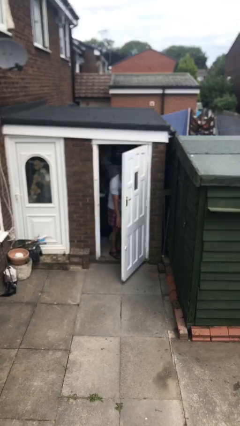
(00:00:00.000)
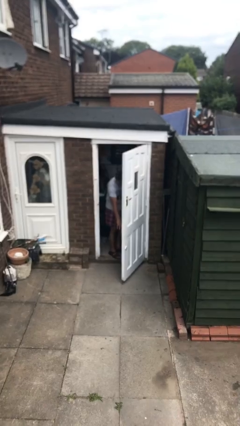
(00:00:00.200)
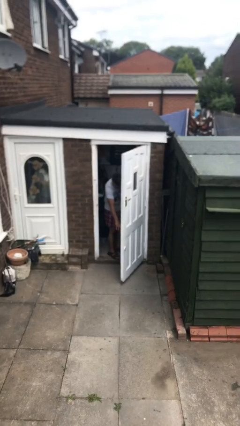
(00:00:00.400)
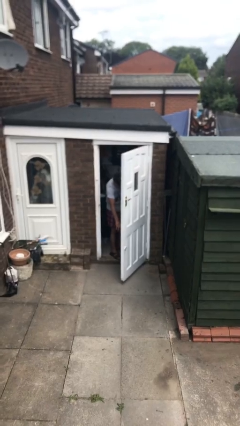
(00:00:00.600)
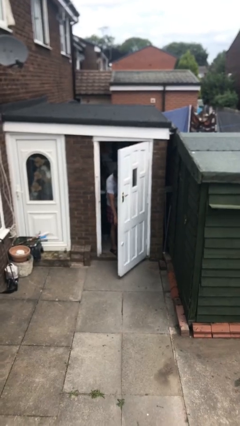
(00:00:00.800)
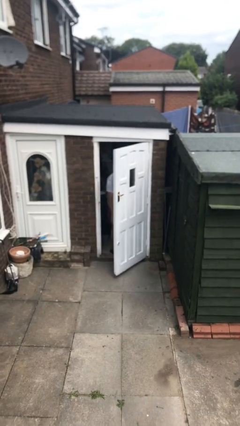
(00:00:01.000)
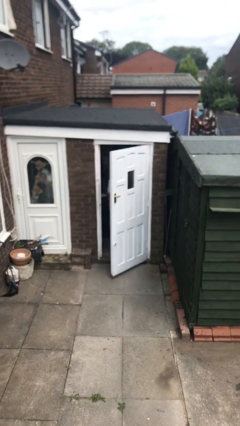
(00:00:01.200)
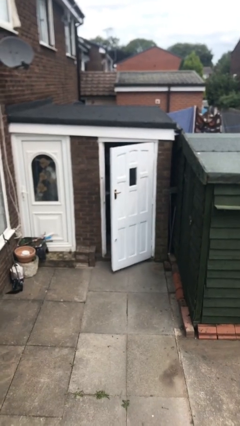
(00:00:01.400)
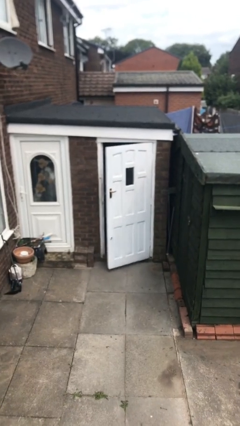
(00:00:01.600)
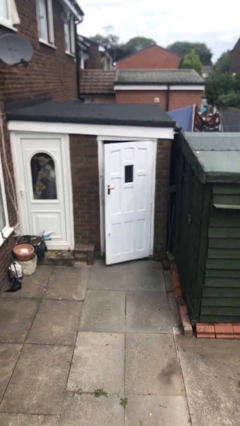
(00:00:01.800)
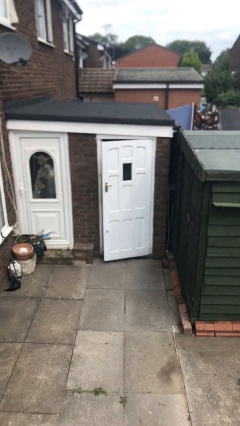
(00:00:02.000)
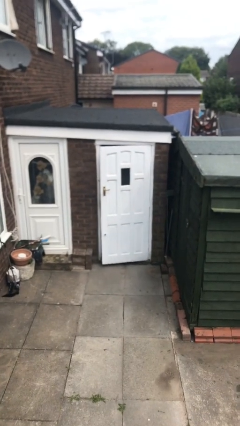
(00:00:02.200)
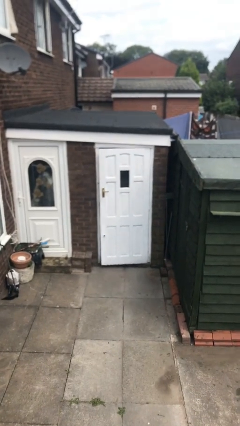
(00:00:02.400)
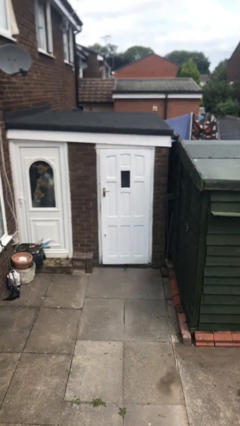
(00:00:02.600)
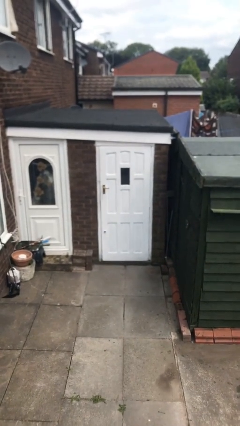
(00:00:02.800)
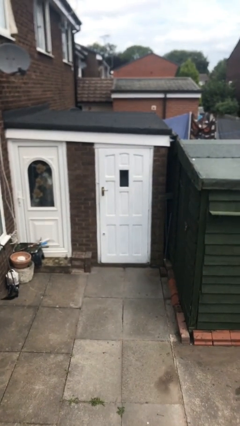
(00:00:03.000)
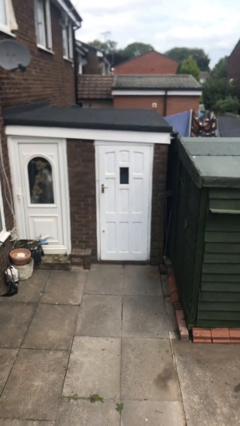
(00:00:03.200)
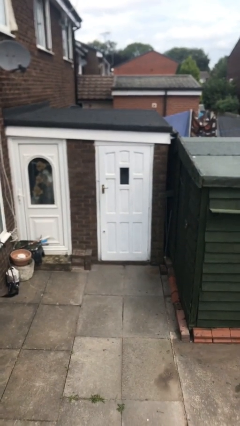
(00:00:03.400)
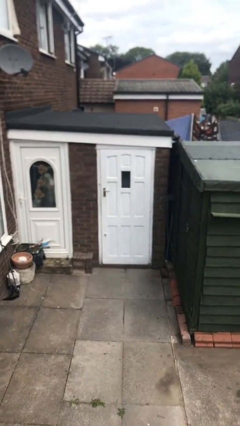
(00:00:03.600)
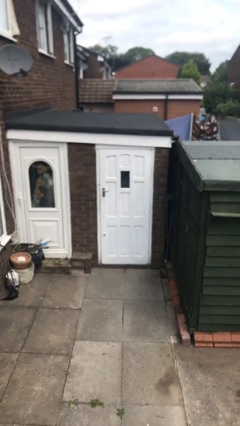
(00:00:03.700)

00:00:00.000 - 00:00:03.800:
person closes facility door

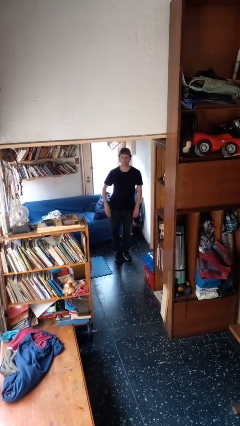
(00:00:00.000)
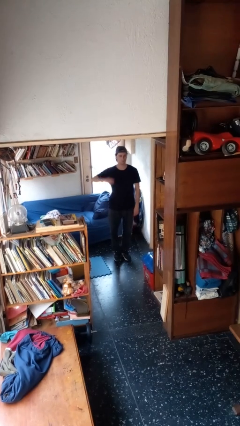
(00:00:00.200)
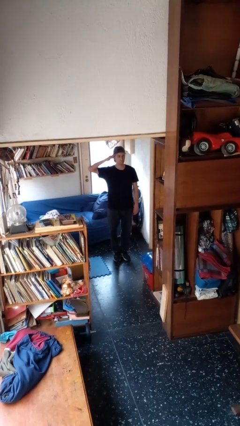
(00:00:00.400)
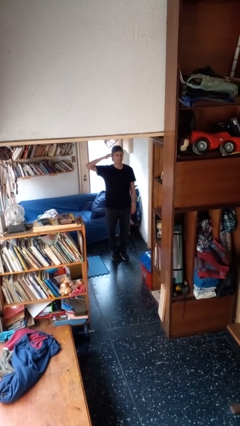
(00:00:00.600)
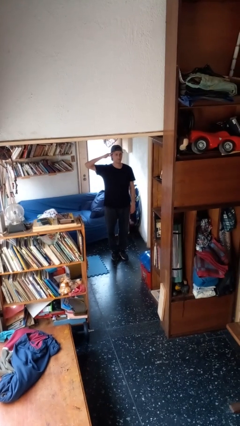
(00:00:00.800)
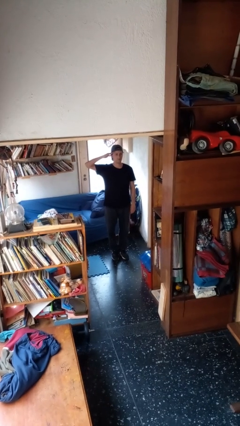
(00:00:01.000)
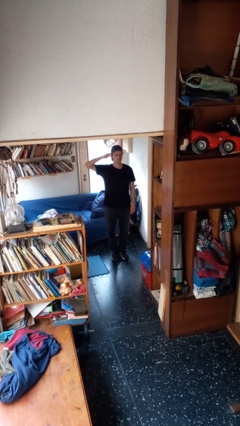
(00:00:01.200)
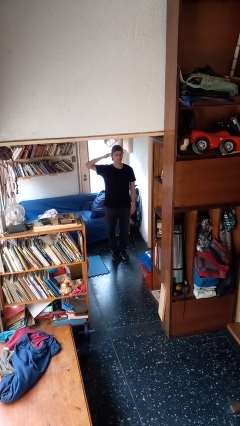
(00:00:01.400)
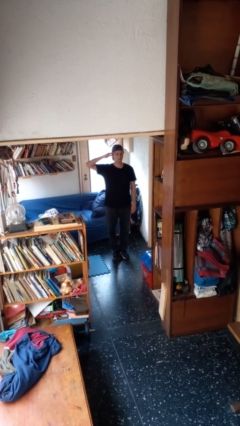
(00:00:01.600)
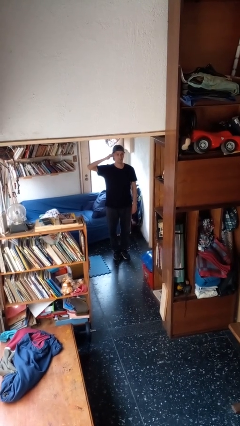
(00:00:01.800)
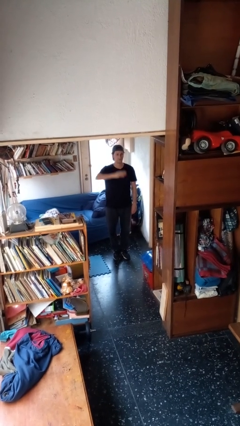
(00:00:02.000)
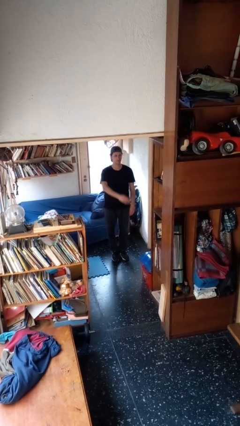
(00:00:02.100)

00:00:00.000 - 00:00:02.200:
person salutes

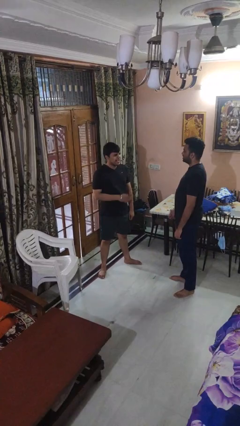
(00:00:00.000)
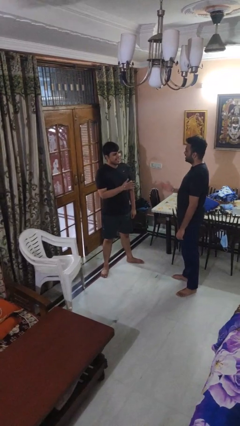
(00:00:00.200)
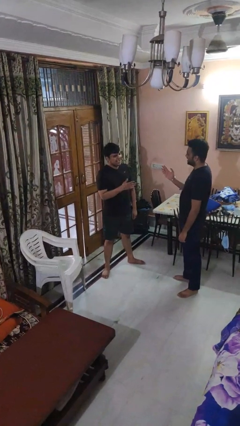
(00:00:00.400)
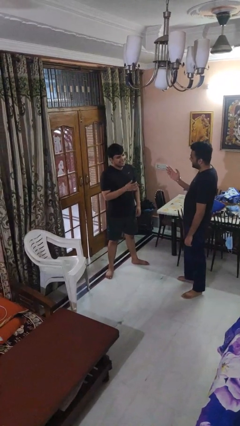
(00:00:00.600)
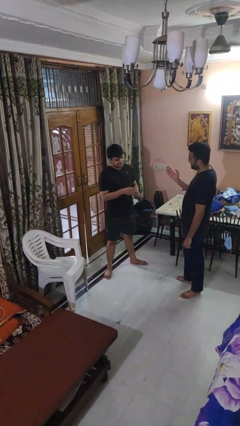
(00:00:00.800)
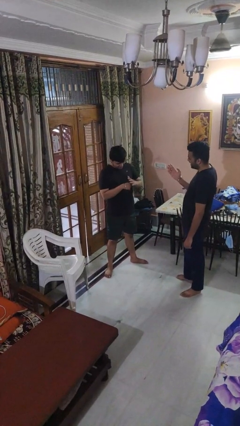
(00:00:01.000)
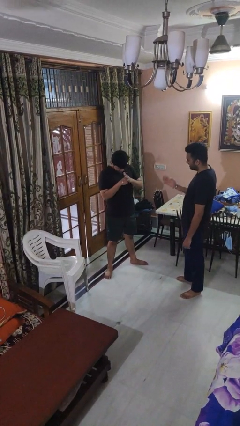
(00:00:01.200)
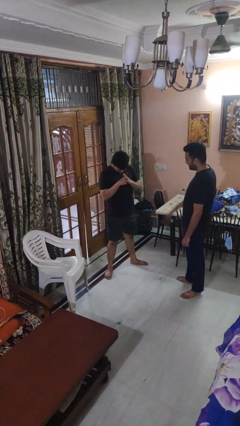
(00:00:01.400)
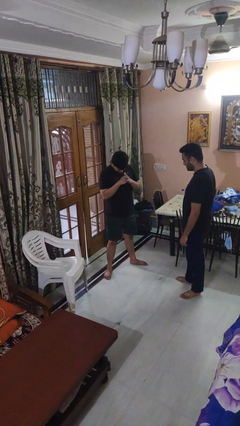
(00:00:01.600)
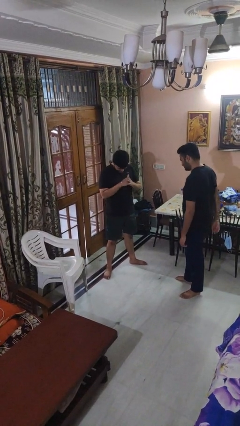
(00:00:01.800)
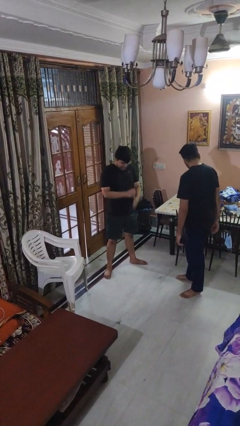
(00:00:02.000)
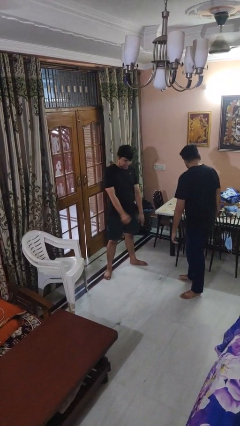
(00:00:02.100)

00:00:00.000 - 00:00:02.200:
person laughs with person

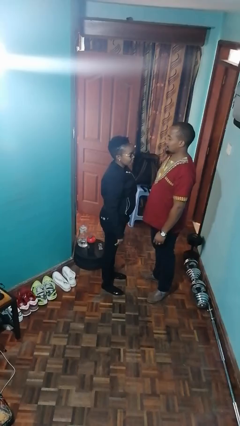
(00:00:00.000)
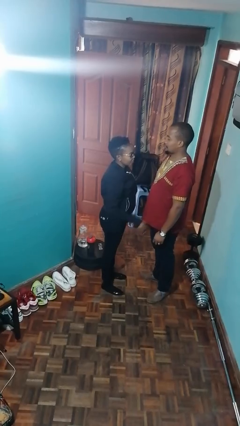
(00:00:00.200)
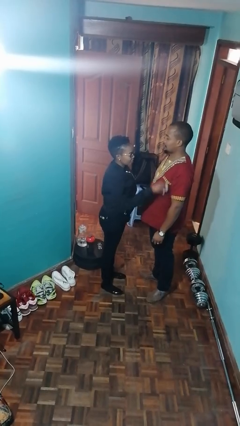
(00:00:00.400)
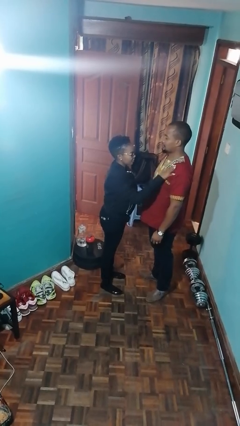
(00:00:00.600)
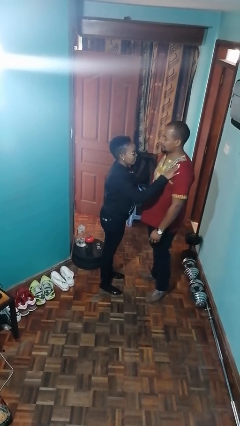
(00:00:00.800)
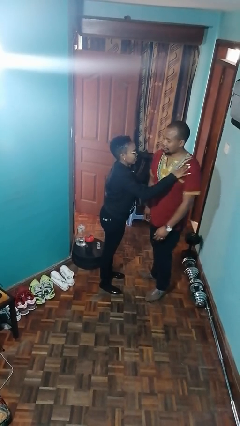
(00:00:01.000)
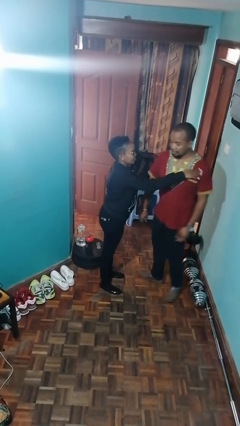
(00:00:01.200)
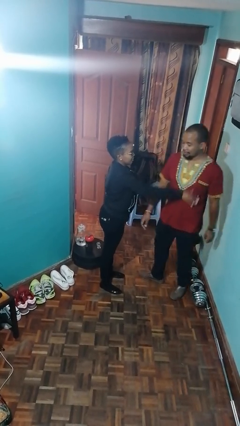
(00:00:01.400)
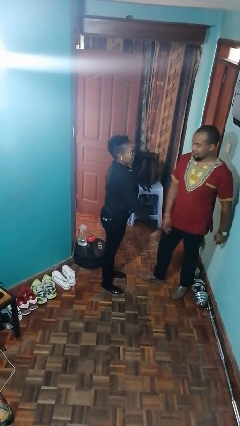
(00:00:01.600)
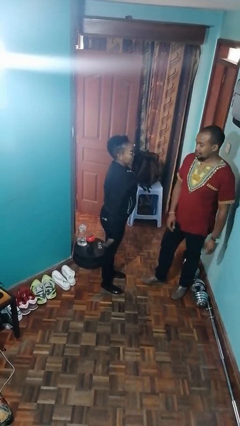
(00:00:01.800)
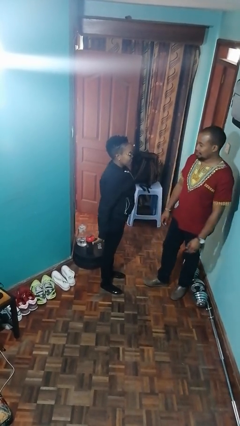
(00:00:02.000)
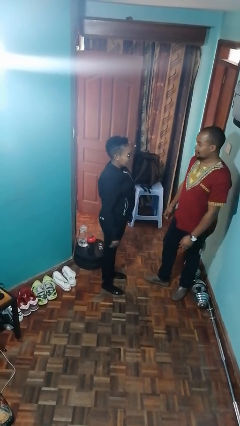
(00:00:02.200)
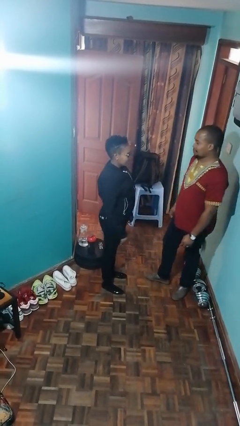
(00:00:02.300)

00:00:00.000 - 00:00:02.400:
person shoves person

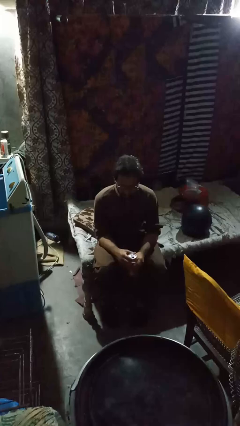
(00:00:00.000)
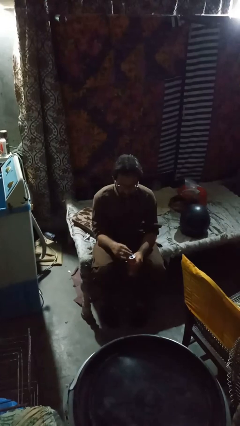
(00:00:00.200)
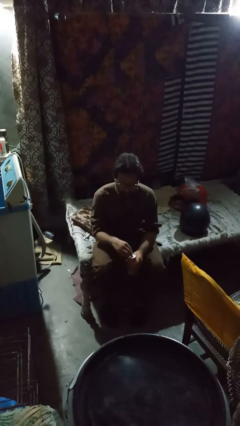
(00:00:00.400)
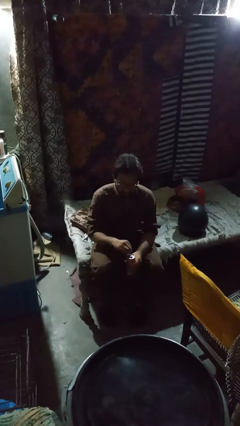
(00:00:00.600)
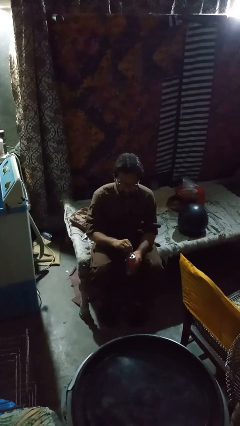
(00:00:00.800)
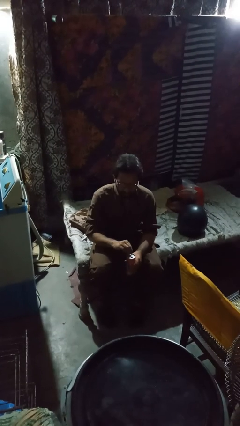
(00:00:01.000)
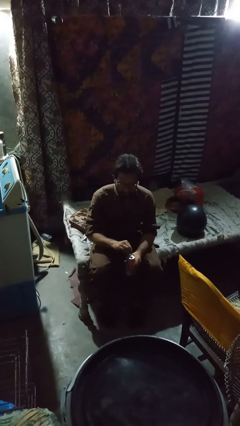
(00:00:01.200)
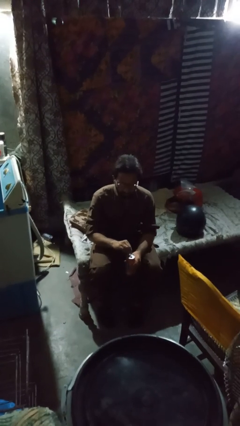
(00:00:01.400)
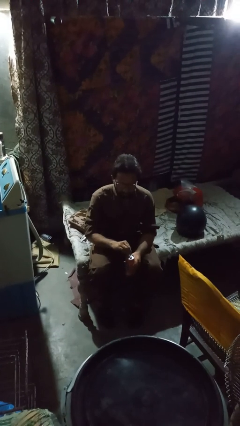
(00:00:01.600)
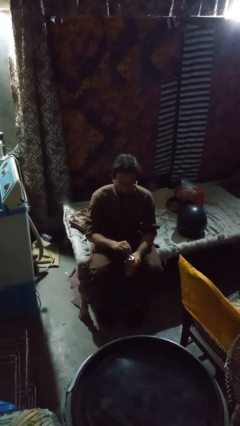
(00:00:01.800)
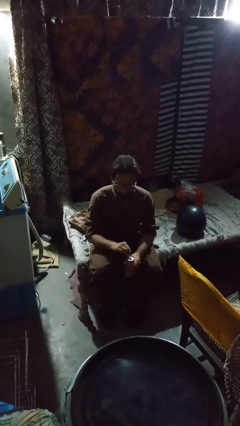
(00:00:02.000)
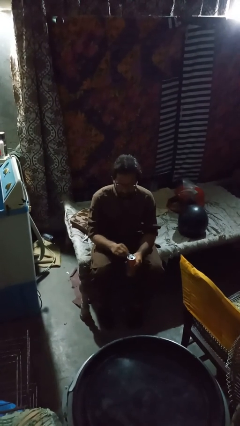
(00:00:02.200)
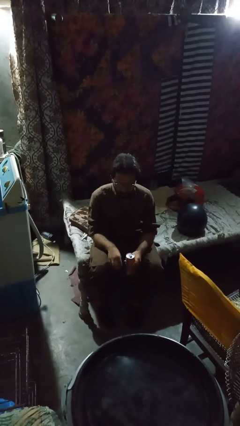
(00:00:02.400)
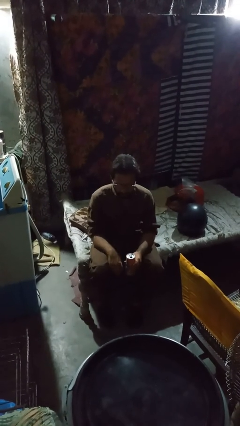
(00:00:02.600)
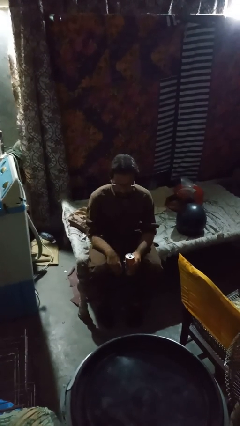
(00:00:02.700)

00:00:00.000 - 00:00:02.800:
person opens can with can opener

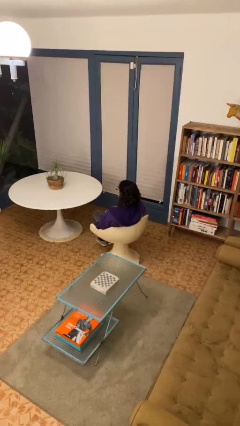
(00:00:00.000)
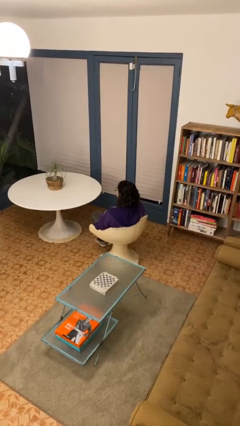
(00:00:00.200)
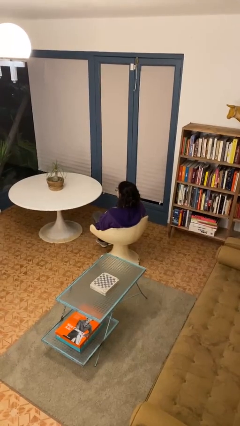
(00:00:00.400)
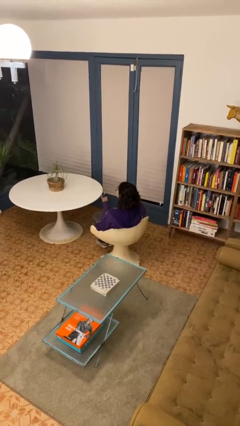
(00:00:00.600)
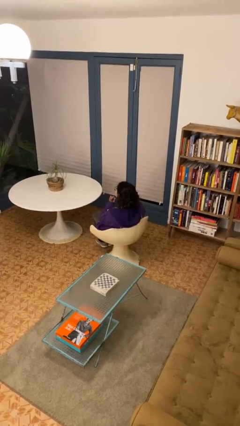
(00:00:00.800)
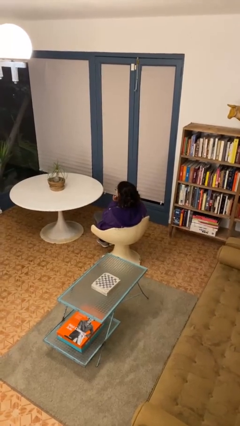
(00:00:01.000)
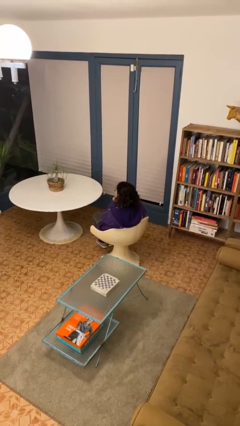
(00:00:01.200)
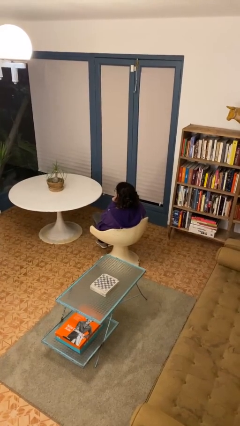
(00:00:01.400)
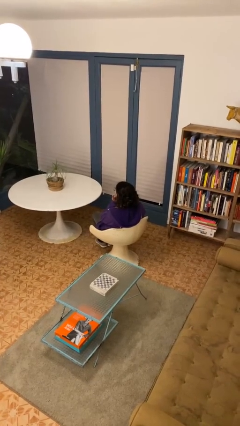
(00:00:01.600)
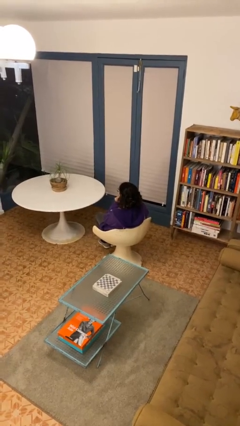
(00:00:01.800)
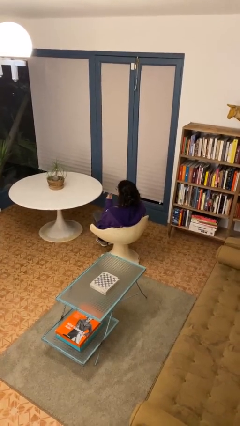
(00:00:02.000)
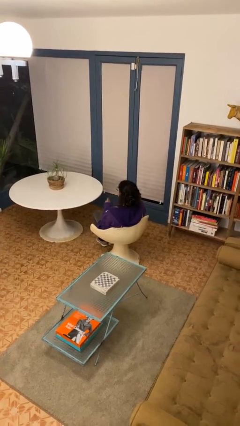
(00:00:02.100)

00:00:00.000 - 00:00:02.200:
person gestures listen closely

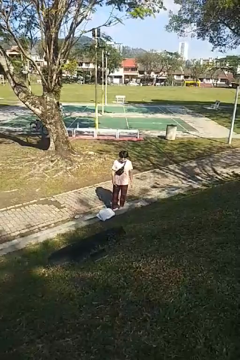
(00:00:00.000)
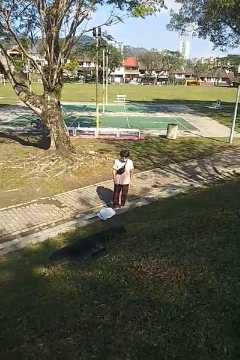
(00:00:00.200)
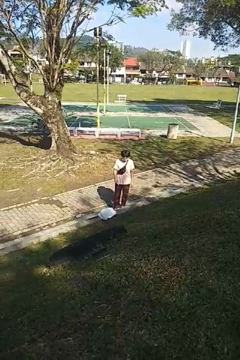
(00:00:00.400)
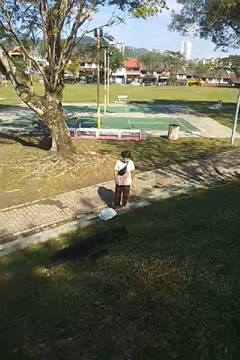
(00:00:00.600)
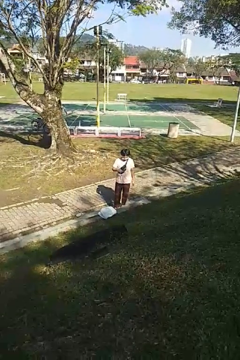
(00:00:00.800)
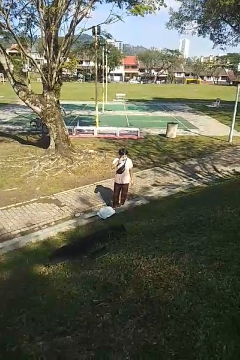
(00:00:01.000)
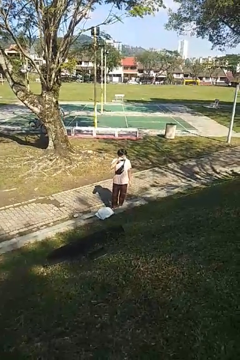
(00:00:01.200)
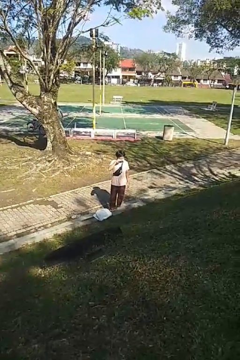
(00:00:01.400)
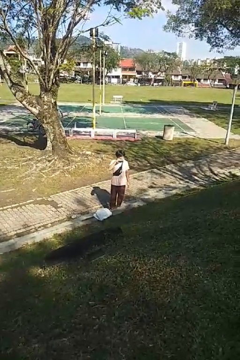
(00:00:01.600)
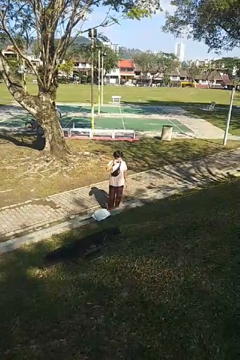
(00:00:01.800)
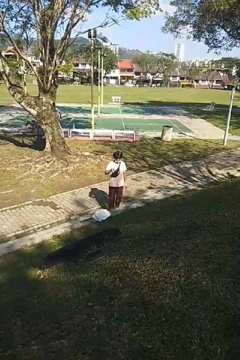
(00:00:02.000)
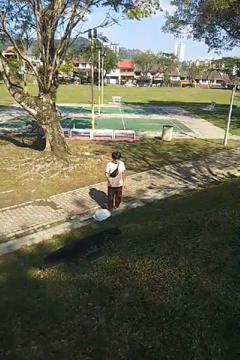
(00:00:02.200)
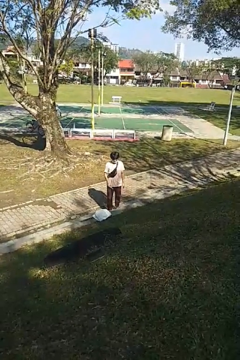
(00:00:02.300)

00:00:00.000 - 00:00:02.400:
person brushes teeth
